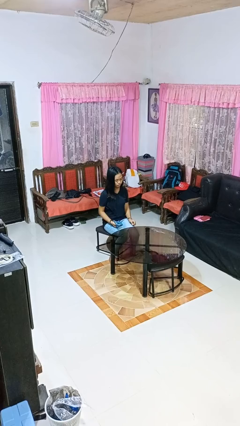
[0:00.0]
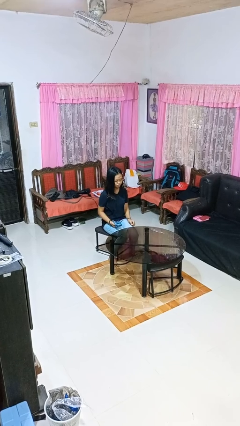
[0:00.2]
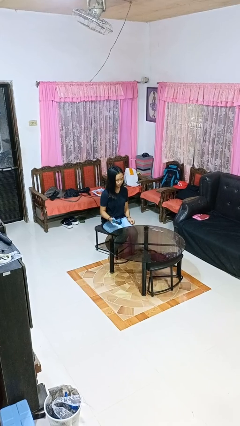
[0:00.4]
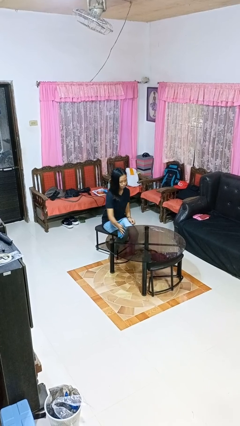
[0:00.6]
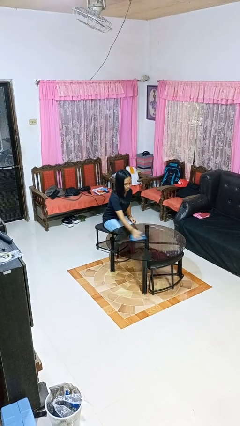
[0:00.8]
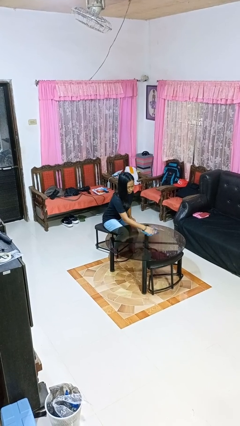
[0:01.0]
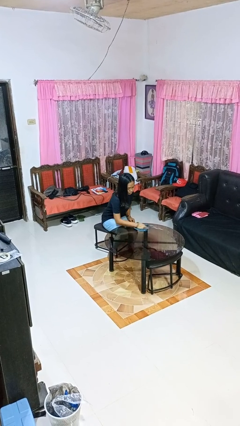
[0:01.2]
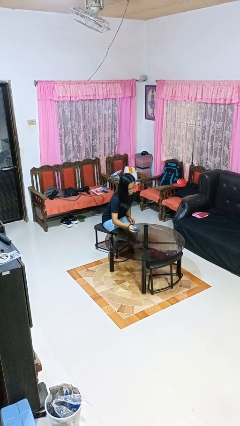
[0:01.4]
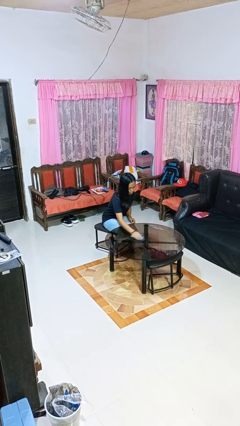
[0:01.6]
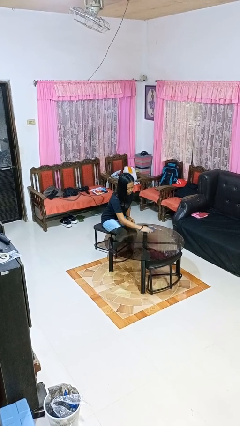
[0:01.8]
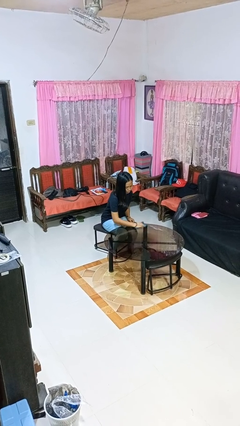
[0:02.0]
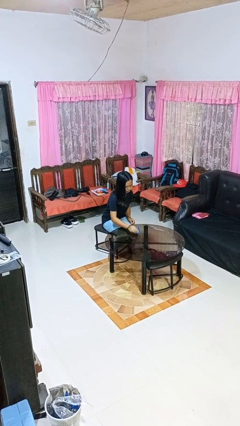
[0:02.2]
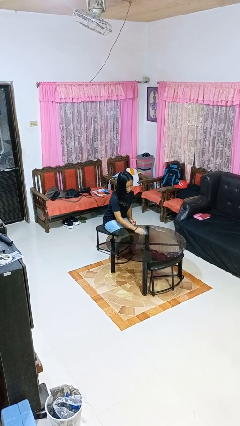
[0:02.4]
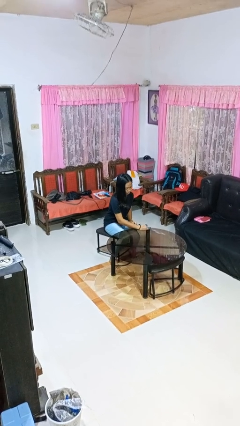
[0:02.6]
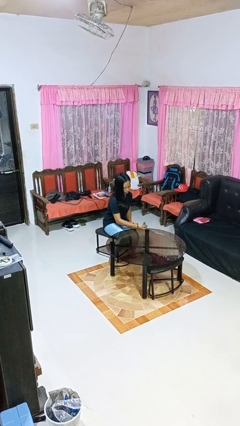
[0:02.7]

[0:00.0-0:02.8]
person cleans table with rag

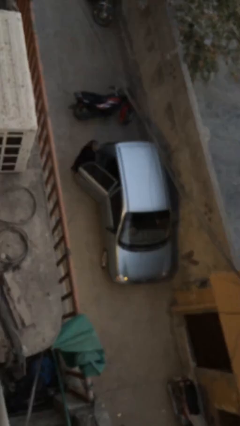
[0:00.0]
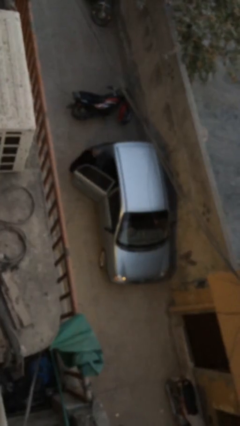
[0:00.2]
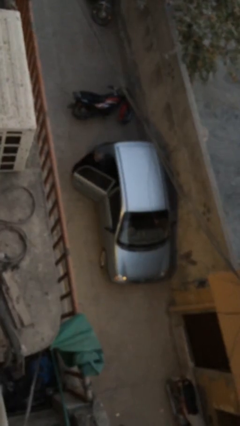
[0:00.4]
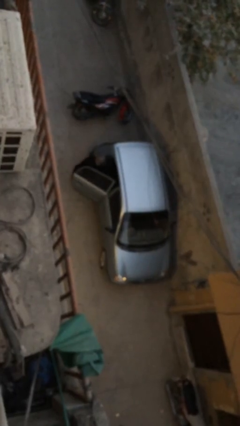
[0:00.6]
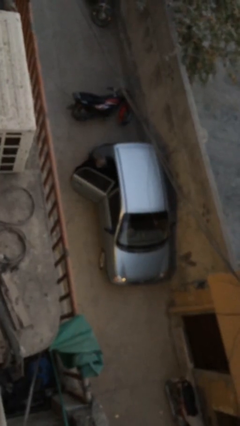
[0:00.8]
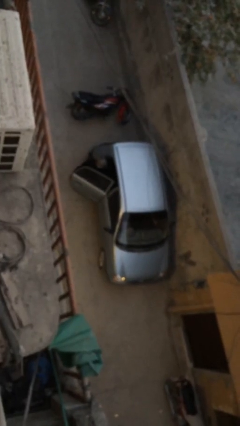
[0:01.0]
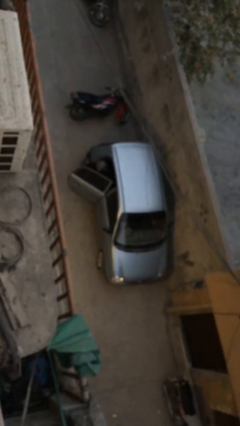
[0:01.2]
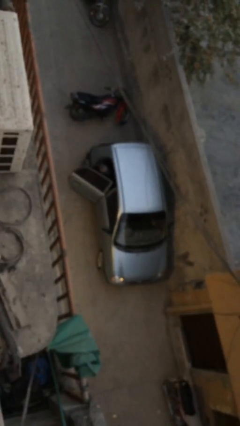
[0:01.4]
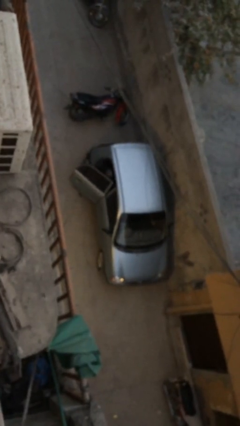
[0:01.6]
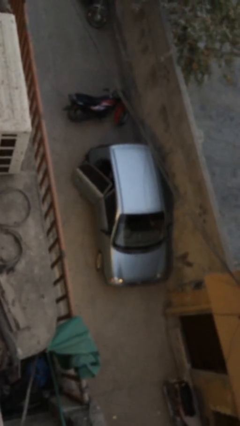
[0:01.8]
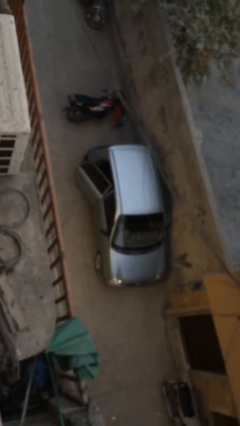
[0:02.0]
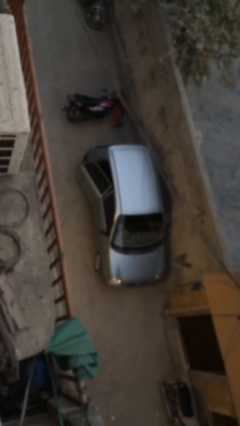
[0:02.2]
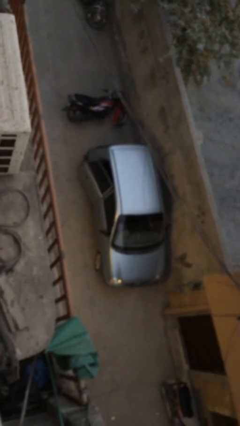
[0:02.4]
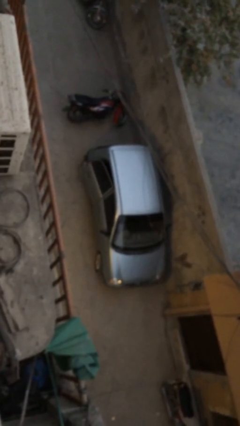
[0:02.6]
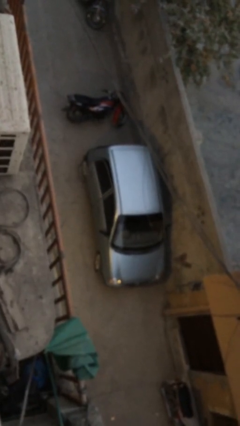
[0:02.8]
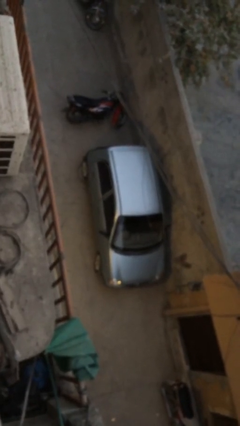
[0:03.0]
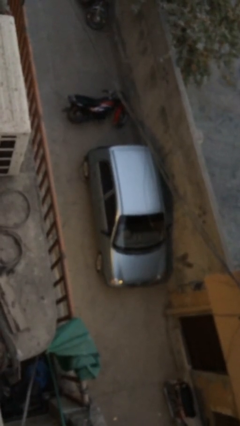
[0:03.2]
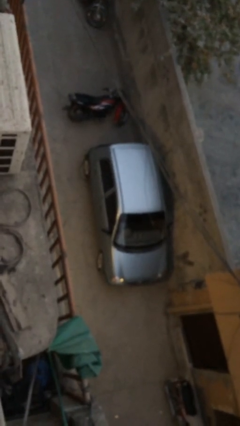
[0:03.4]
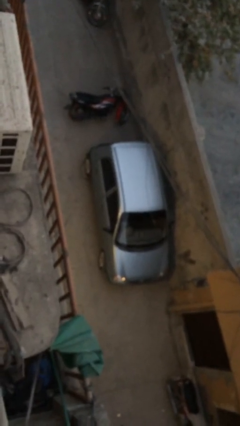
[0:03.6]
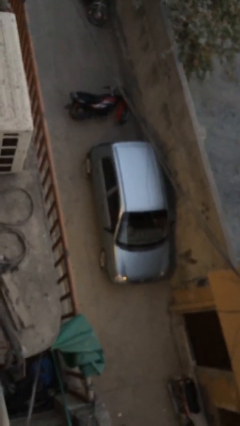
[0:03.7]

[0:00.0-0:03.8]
car picks up person

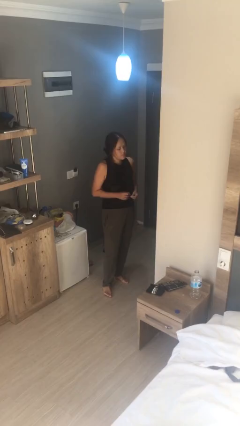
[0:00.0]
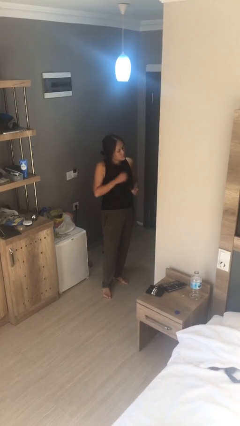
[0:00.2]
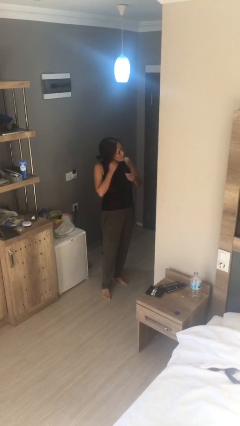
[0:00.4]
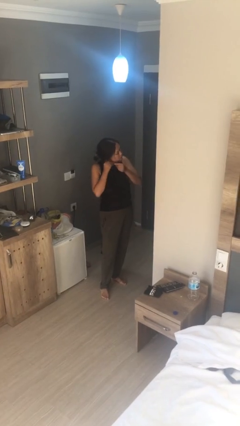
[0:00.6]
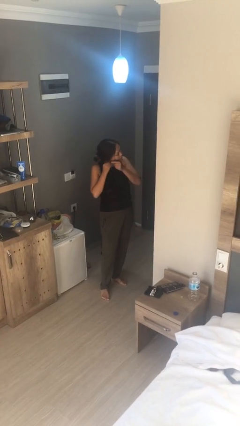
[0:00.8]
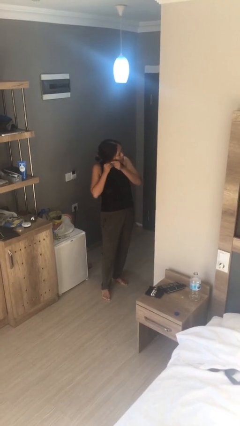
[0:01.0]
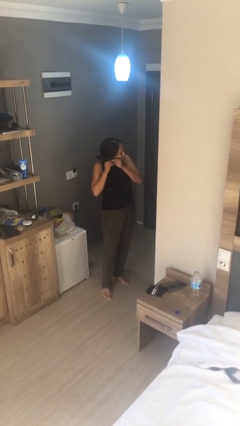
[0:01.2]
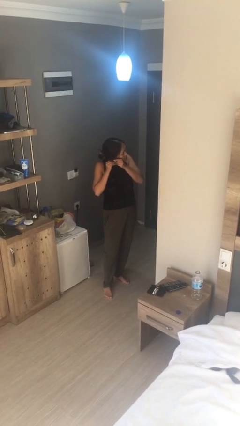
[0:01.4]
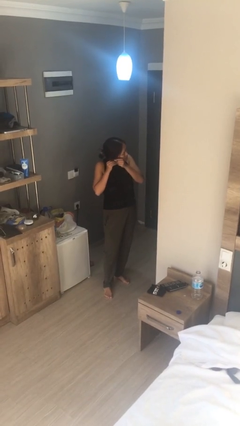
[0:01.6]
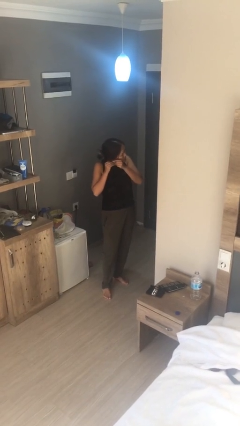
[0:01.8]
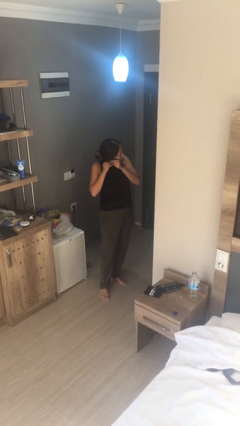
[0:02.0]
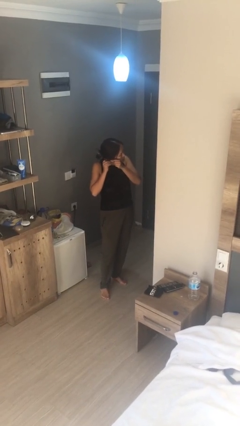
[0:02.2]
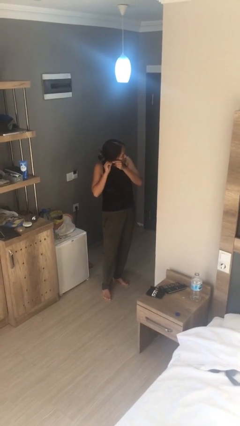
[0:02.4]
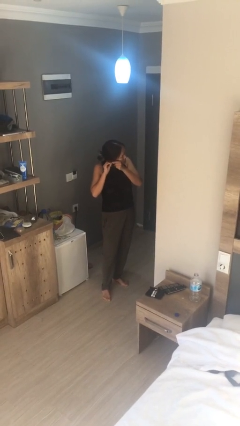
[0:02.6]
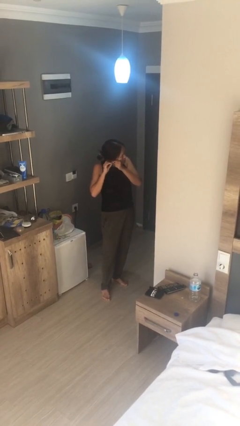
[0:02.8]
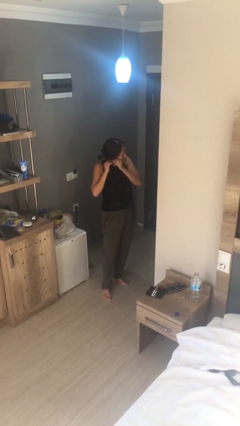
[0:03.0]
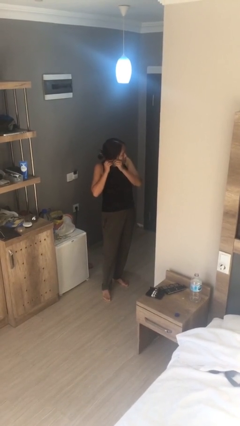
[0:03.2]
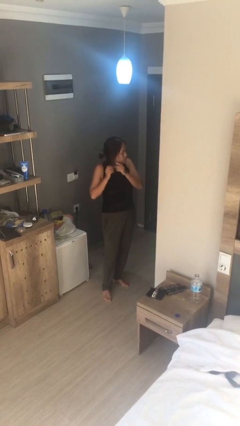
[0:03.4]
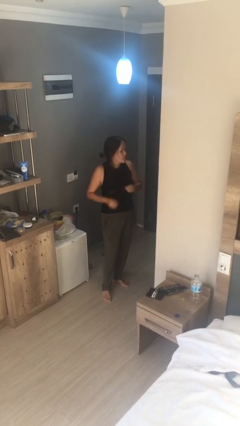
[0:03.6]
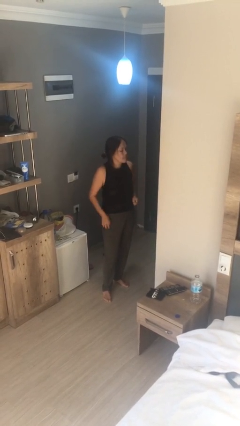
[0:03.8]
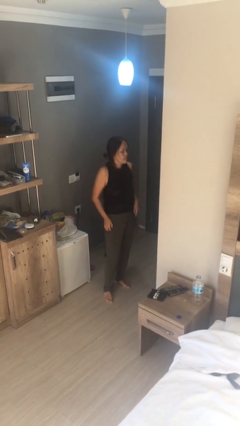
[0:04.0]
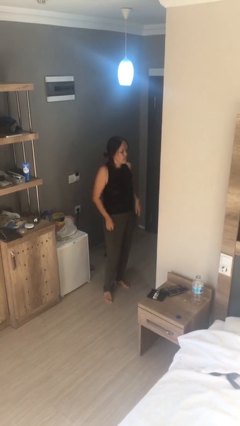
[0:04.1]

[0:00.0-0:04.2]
person puts on earrings

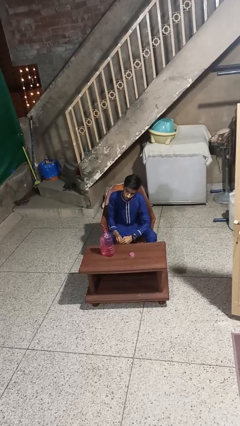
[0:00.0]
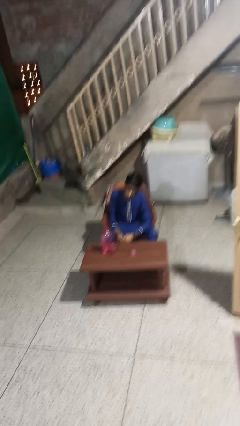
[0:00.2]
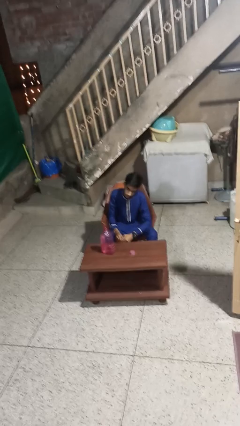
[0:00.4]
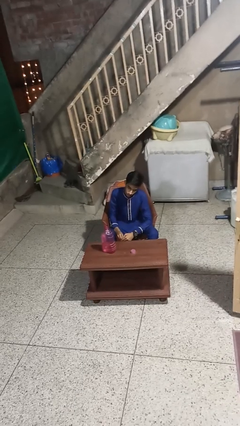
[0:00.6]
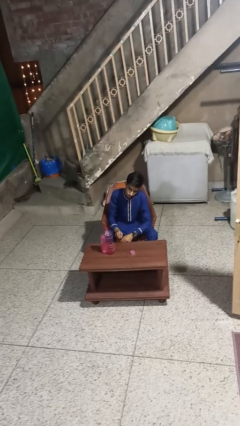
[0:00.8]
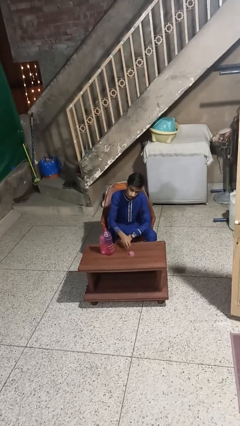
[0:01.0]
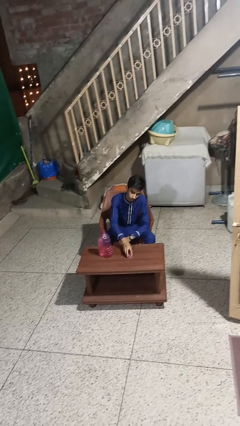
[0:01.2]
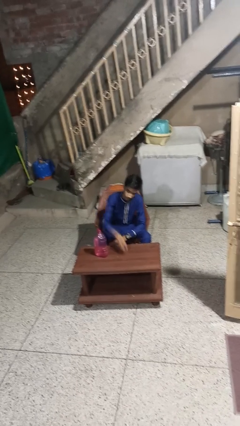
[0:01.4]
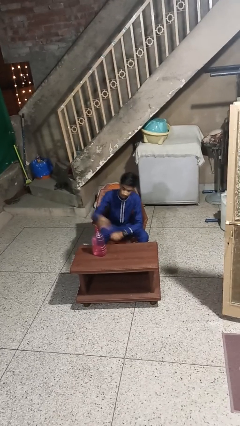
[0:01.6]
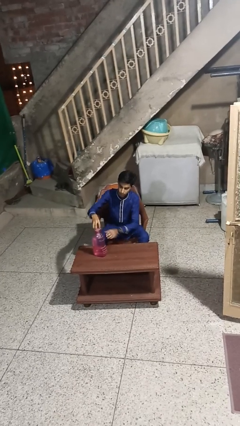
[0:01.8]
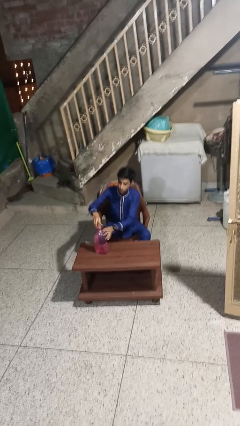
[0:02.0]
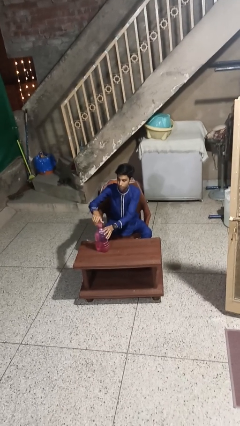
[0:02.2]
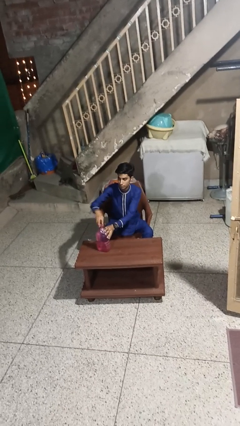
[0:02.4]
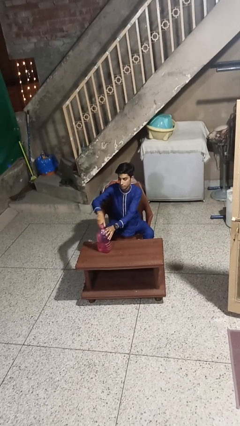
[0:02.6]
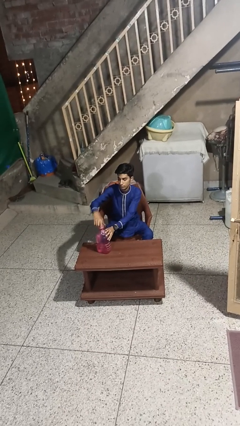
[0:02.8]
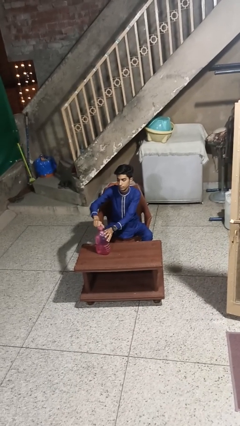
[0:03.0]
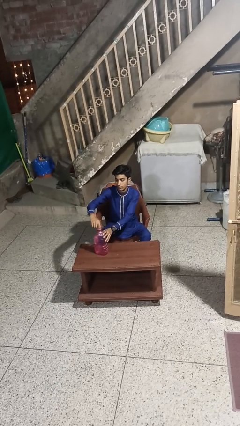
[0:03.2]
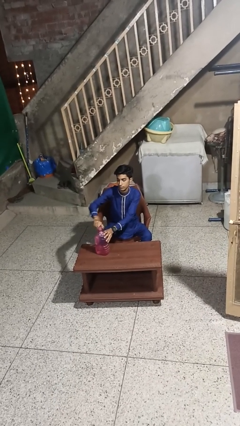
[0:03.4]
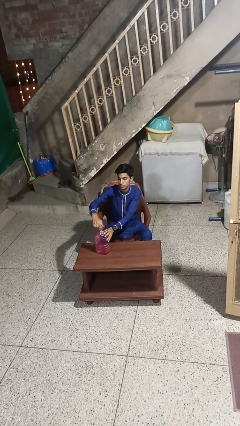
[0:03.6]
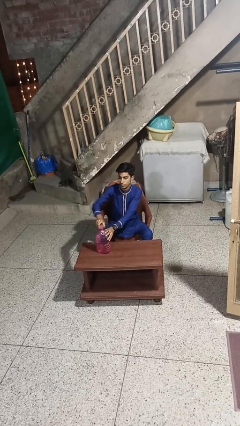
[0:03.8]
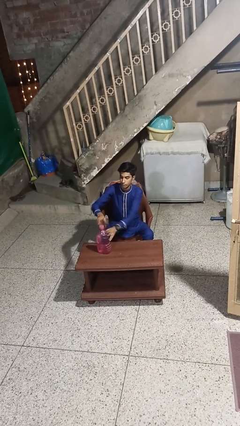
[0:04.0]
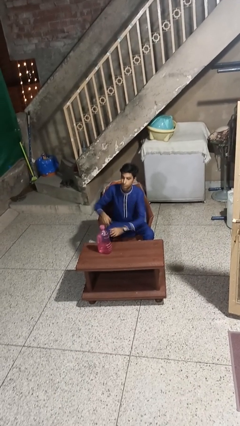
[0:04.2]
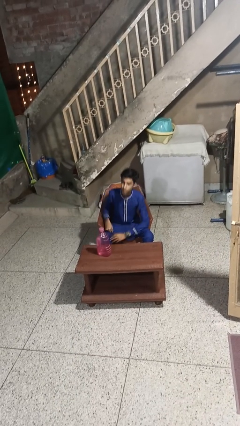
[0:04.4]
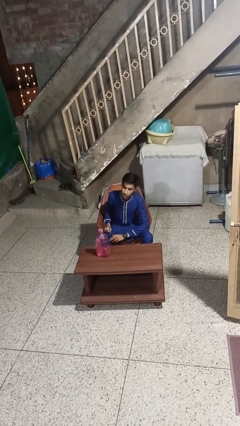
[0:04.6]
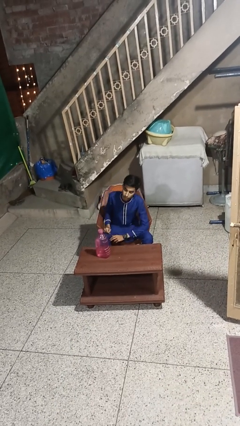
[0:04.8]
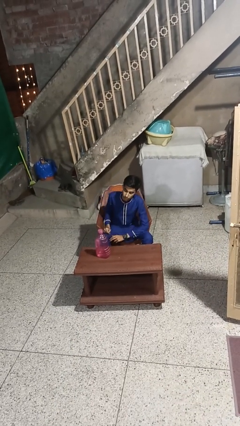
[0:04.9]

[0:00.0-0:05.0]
person screws lid to bottle

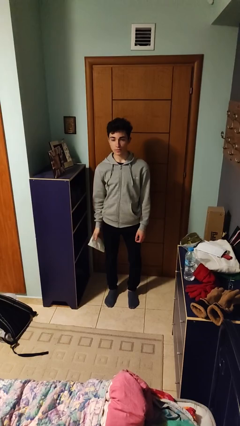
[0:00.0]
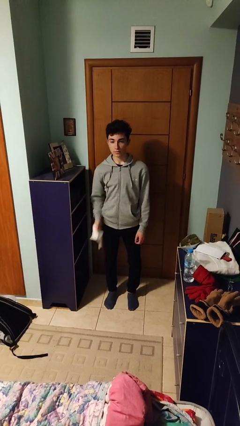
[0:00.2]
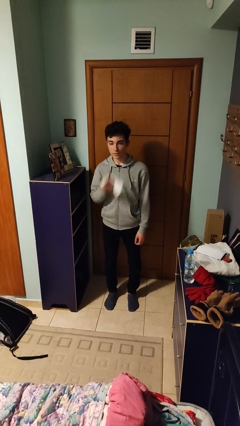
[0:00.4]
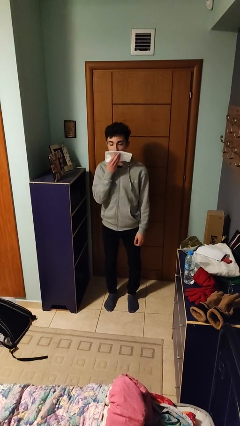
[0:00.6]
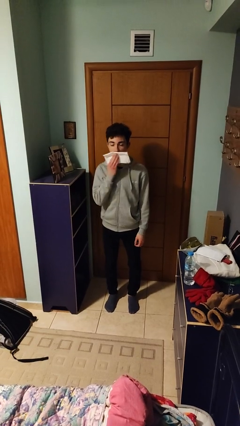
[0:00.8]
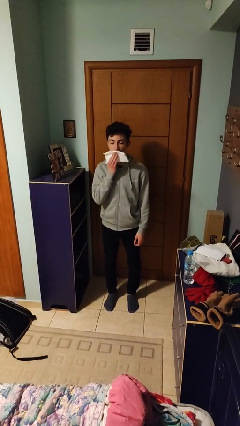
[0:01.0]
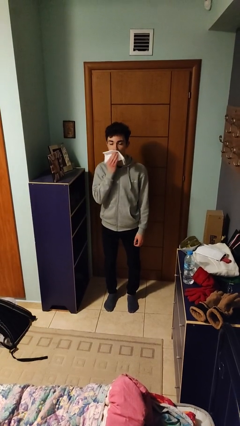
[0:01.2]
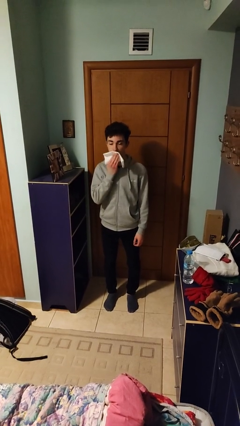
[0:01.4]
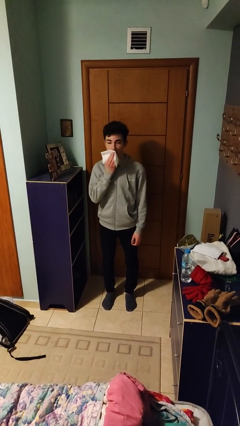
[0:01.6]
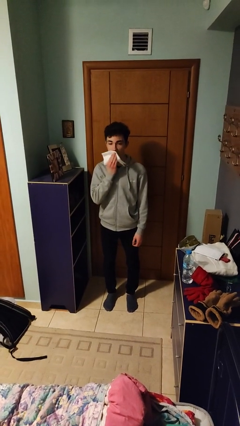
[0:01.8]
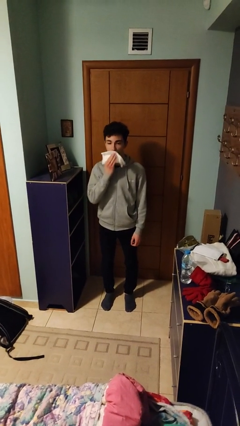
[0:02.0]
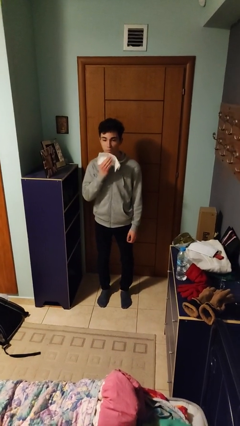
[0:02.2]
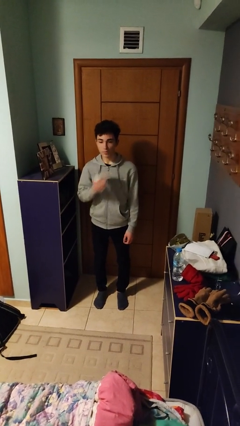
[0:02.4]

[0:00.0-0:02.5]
person wipes mouth with napkin
